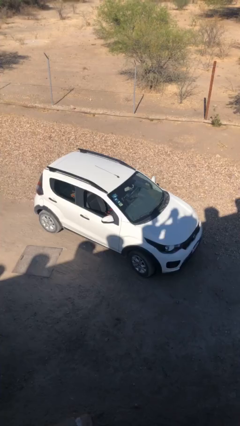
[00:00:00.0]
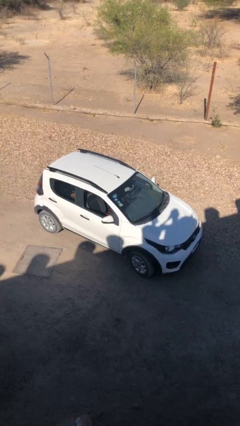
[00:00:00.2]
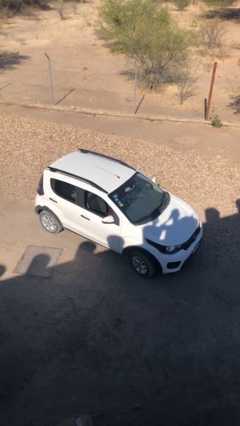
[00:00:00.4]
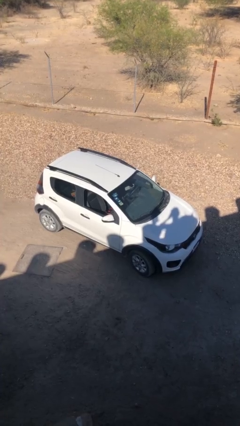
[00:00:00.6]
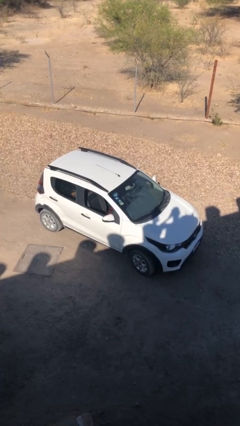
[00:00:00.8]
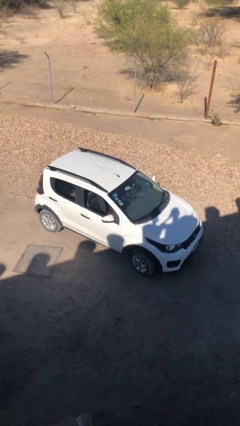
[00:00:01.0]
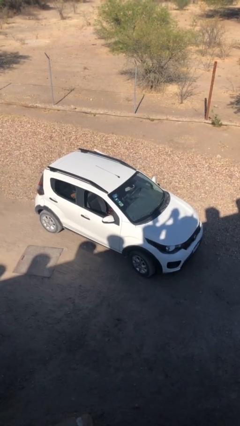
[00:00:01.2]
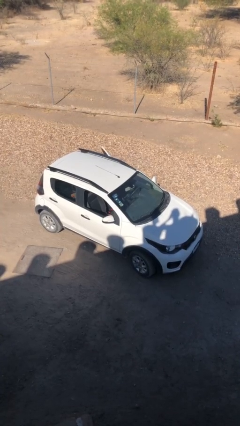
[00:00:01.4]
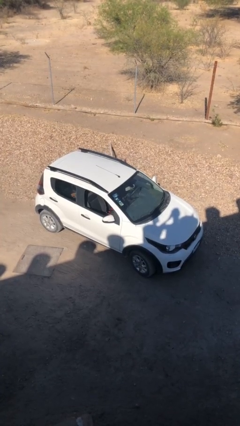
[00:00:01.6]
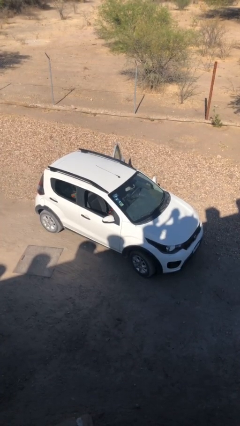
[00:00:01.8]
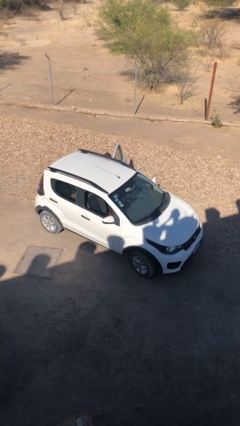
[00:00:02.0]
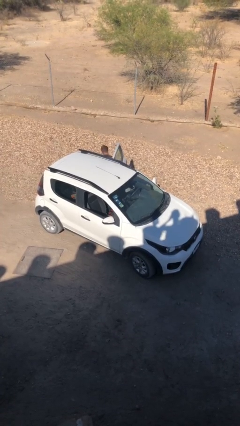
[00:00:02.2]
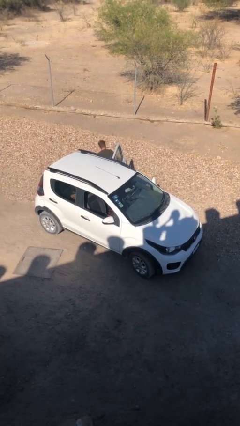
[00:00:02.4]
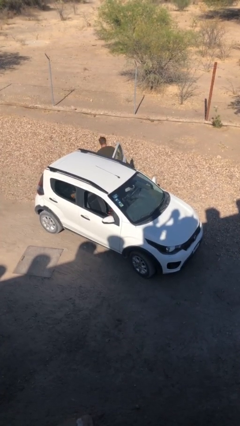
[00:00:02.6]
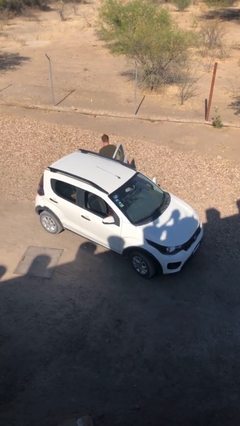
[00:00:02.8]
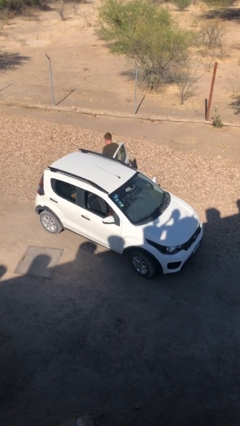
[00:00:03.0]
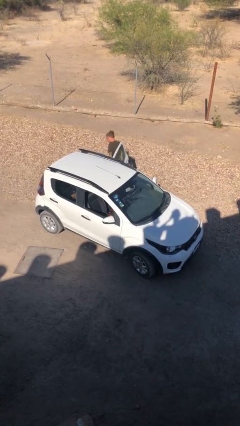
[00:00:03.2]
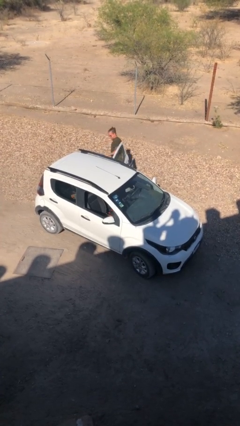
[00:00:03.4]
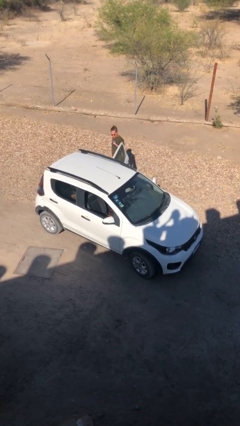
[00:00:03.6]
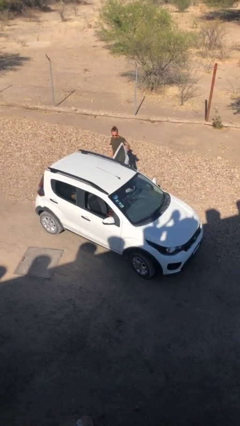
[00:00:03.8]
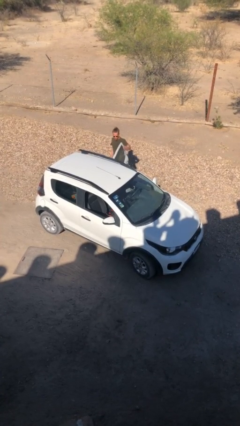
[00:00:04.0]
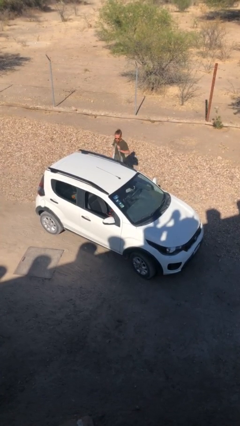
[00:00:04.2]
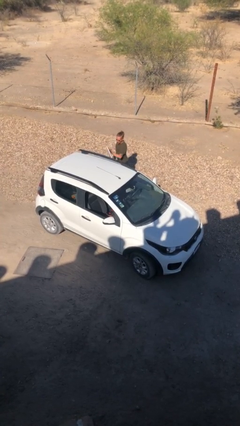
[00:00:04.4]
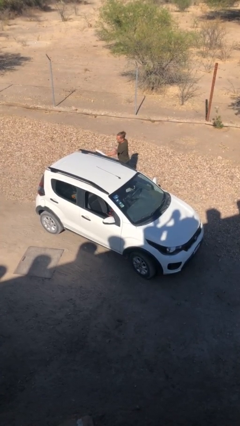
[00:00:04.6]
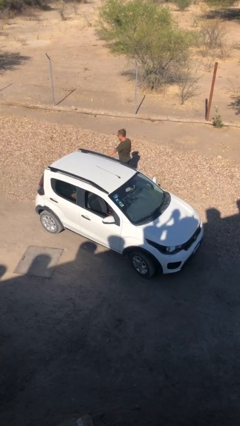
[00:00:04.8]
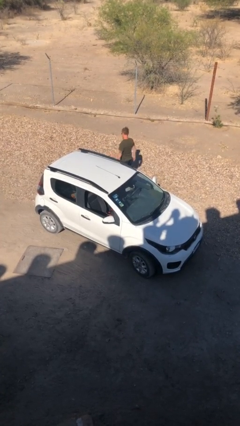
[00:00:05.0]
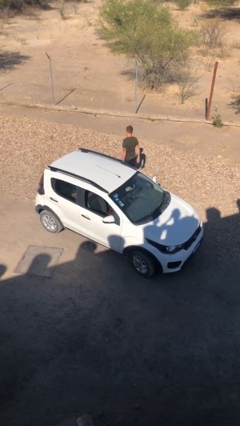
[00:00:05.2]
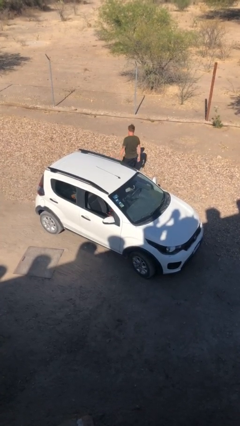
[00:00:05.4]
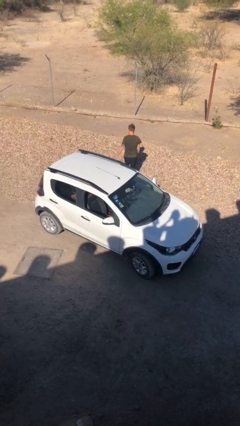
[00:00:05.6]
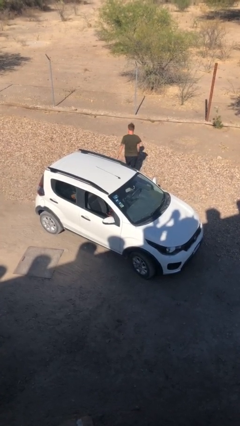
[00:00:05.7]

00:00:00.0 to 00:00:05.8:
car drops off person

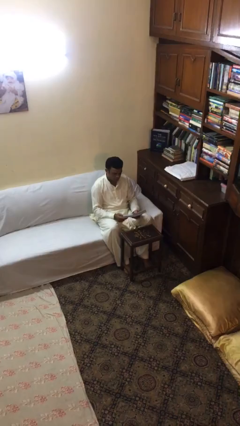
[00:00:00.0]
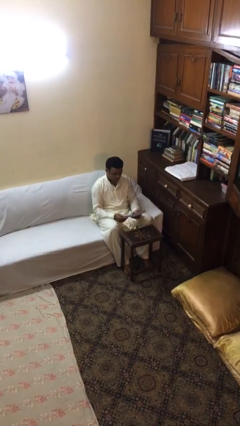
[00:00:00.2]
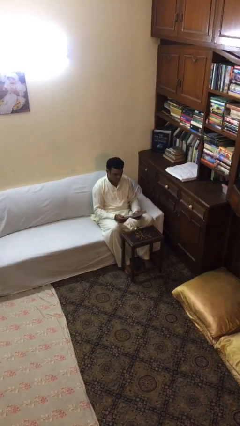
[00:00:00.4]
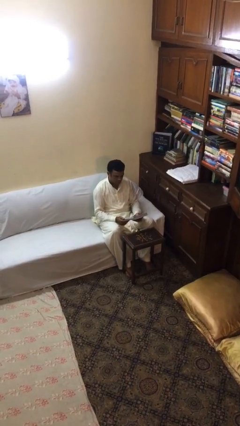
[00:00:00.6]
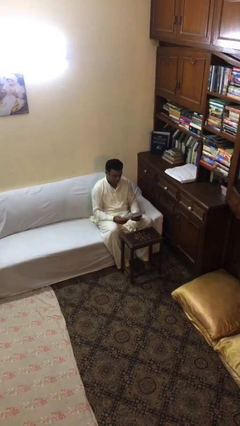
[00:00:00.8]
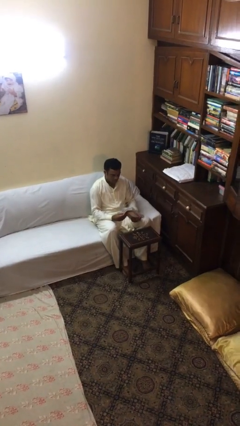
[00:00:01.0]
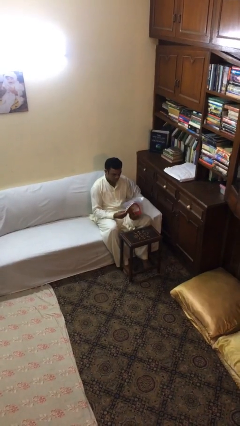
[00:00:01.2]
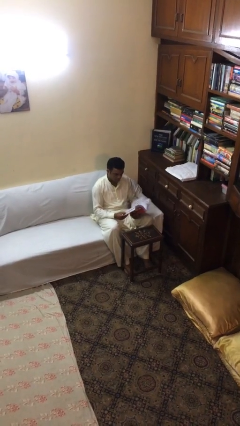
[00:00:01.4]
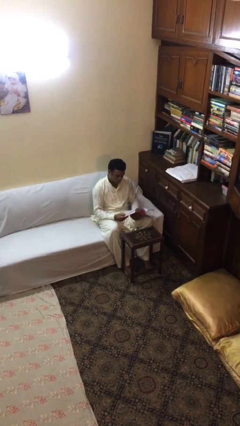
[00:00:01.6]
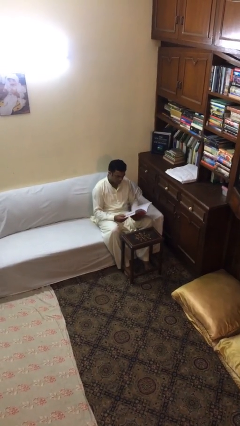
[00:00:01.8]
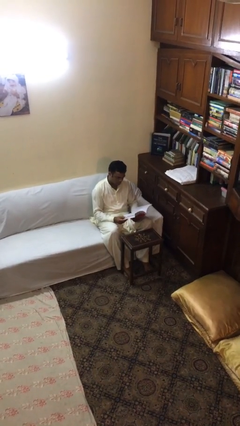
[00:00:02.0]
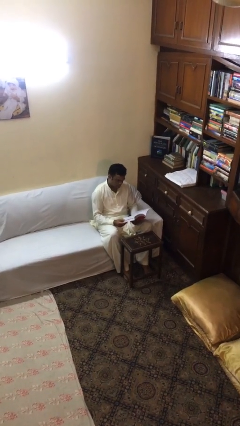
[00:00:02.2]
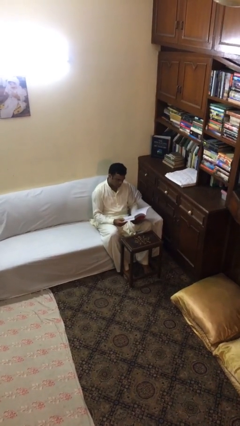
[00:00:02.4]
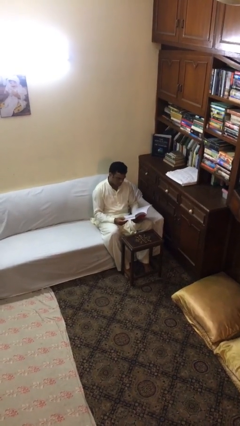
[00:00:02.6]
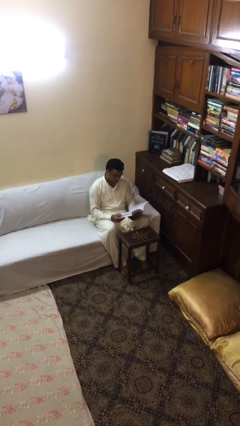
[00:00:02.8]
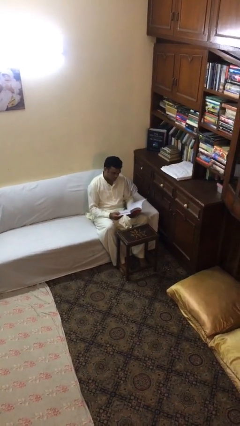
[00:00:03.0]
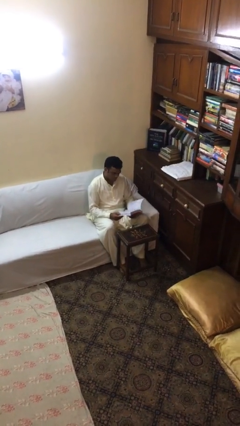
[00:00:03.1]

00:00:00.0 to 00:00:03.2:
person reads document

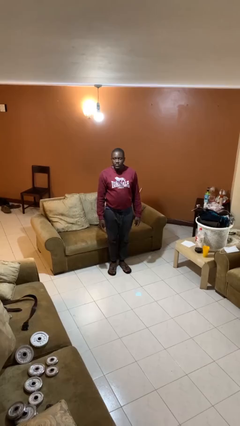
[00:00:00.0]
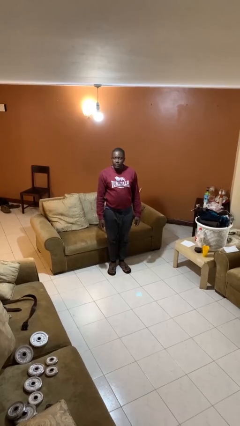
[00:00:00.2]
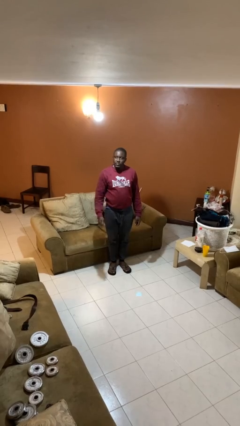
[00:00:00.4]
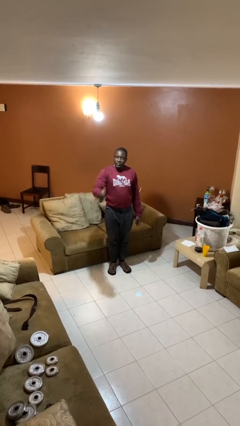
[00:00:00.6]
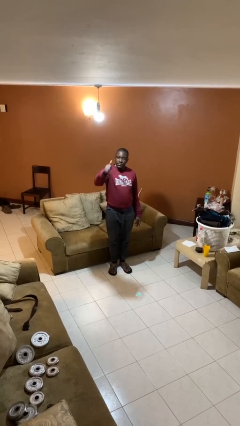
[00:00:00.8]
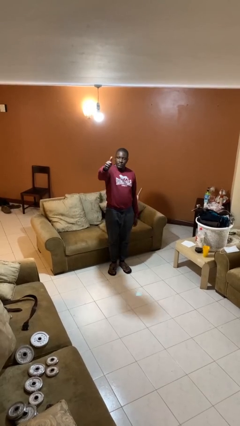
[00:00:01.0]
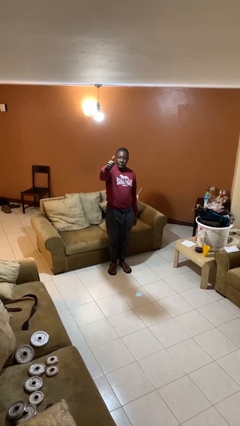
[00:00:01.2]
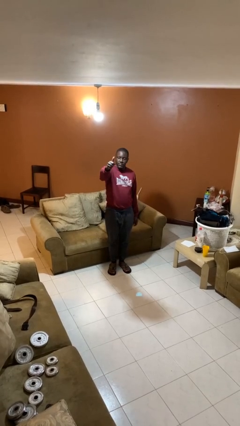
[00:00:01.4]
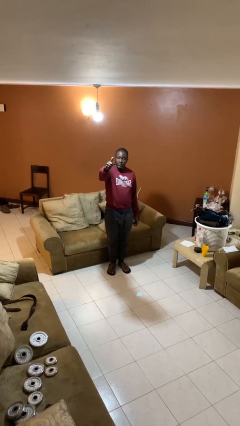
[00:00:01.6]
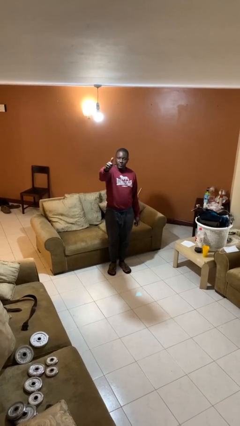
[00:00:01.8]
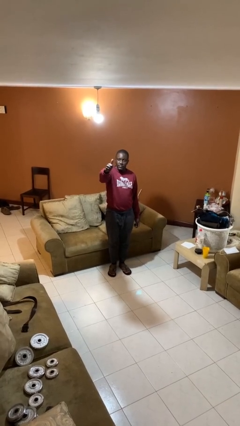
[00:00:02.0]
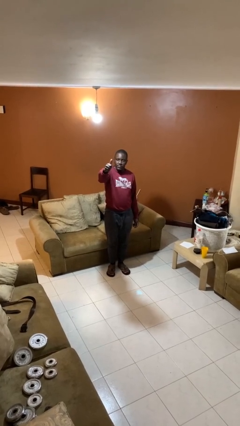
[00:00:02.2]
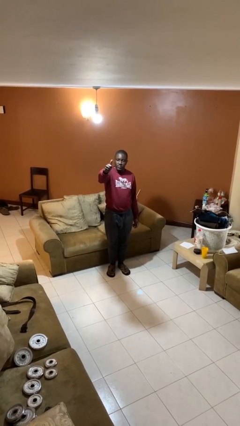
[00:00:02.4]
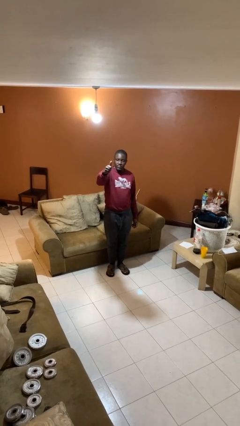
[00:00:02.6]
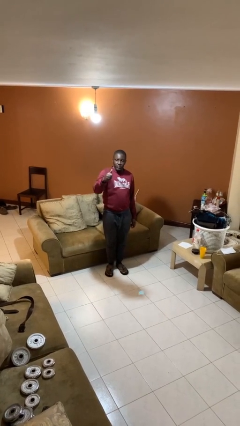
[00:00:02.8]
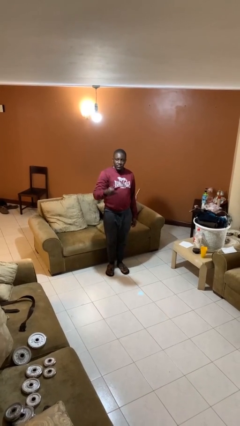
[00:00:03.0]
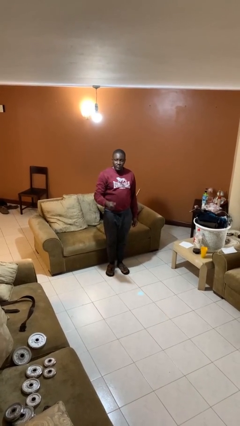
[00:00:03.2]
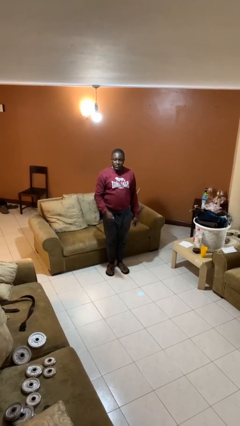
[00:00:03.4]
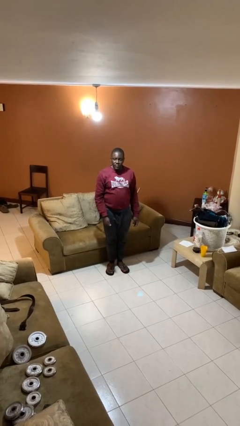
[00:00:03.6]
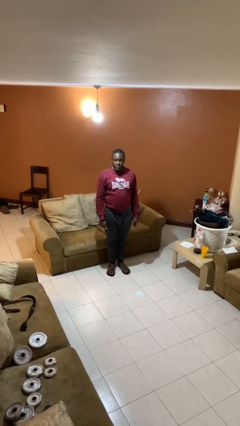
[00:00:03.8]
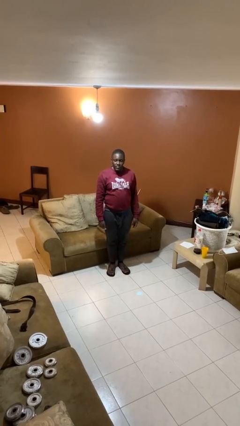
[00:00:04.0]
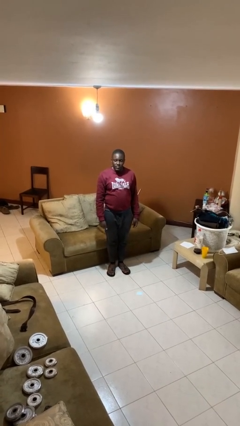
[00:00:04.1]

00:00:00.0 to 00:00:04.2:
person gestures thumbs up

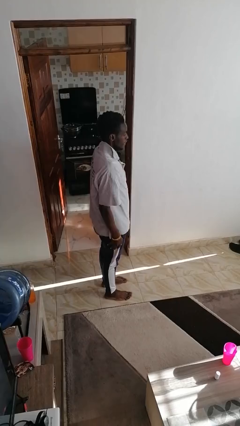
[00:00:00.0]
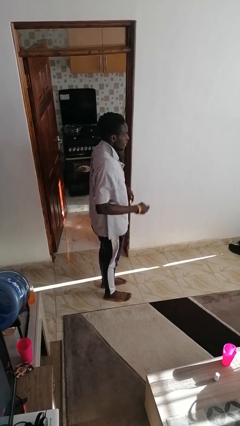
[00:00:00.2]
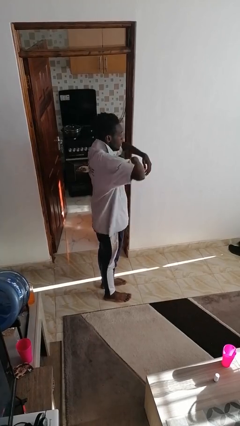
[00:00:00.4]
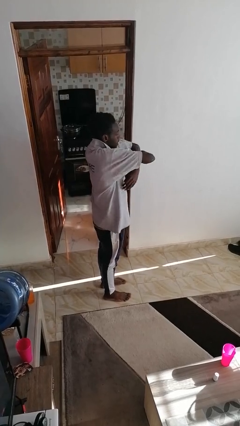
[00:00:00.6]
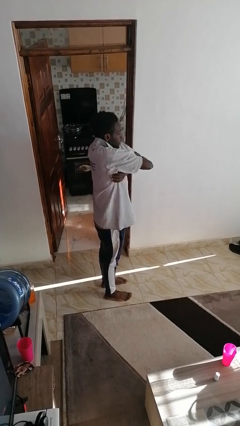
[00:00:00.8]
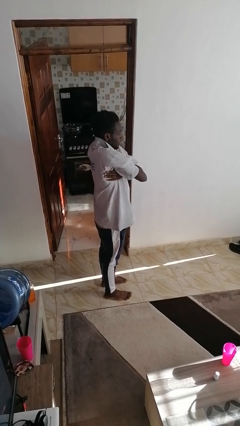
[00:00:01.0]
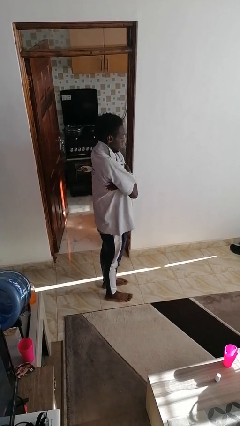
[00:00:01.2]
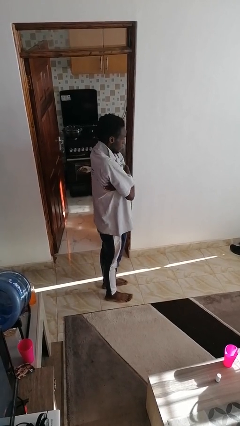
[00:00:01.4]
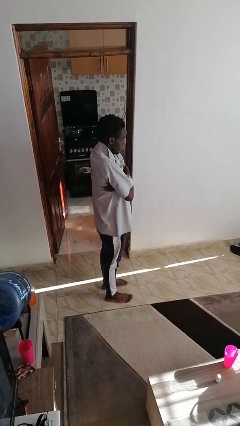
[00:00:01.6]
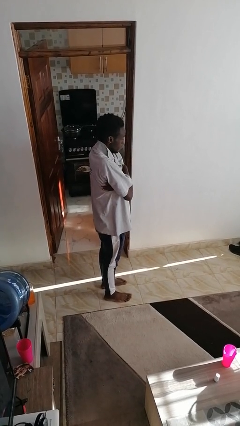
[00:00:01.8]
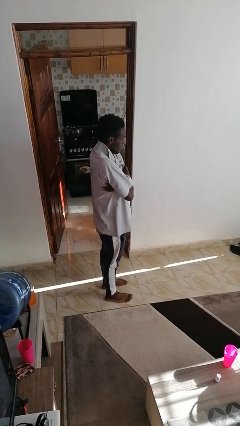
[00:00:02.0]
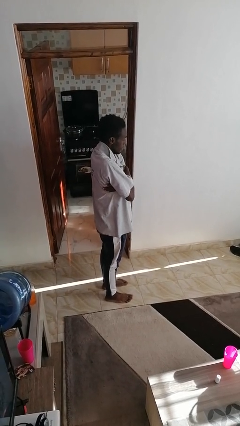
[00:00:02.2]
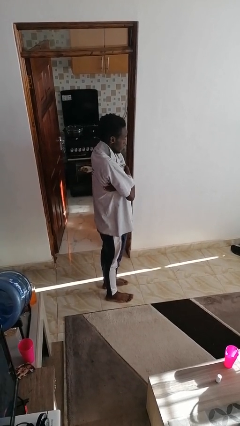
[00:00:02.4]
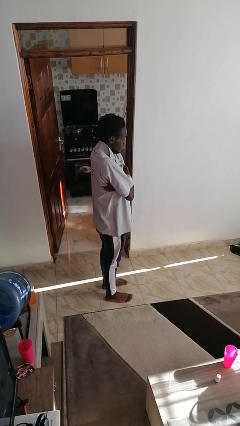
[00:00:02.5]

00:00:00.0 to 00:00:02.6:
person crosses arms

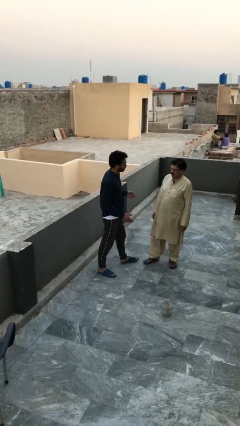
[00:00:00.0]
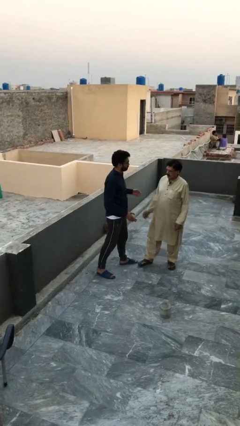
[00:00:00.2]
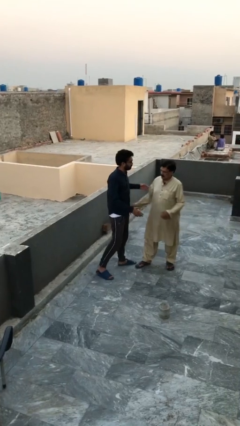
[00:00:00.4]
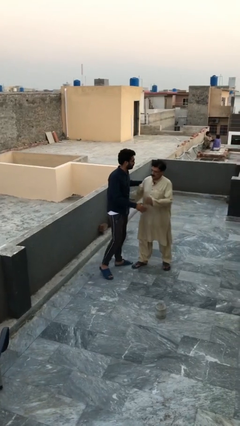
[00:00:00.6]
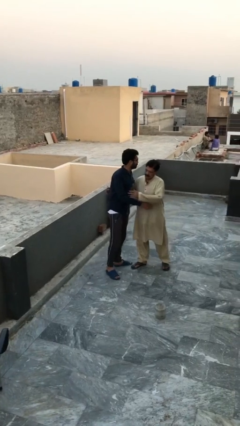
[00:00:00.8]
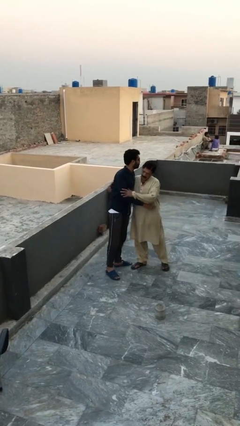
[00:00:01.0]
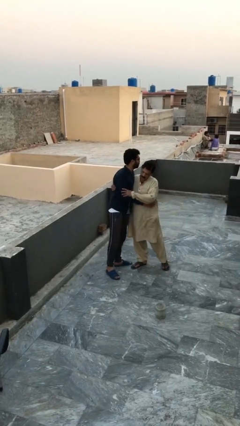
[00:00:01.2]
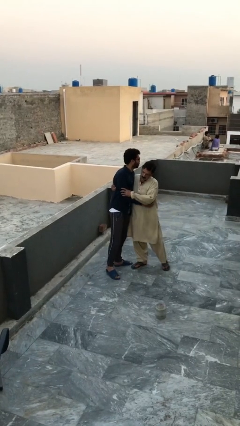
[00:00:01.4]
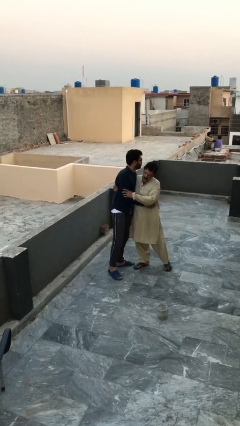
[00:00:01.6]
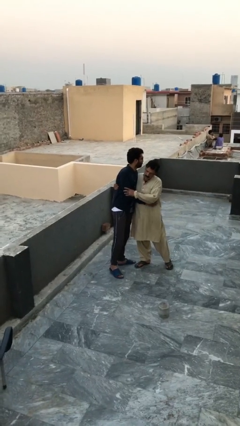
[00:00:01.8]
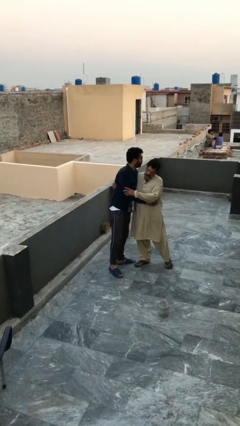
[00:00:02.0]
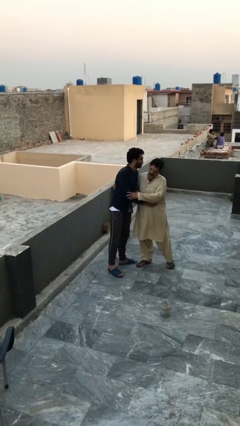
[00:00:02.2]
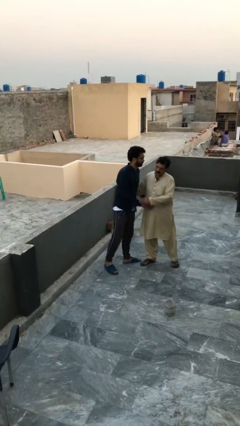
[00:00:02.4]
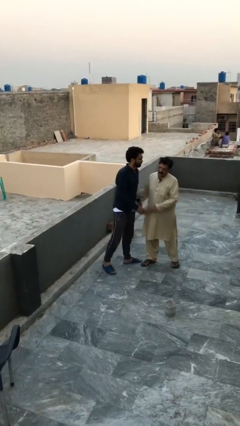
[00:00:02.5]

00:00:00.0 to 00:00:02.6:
person embraces person
